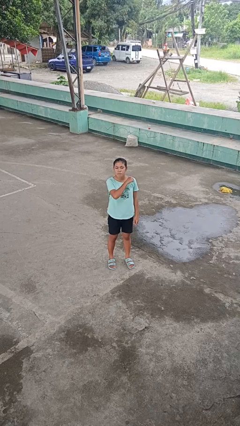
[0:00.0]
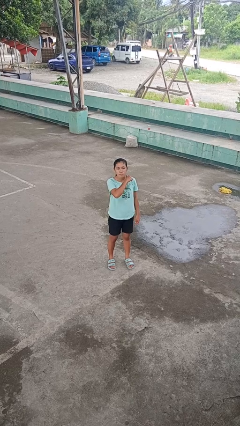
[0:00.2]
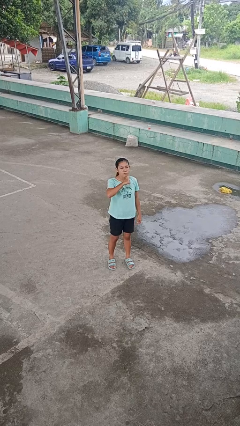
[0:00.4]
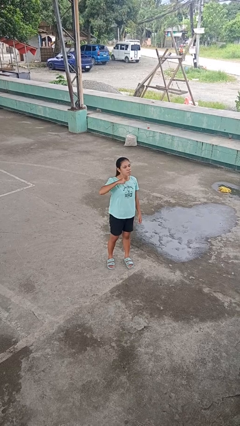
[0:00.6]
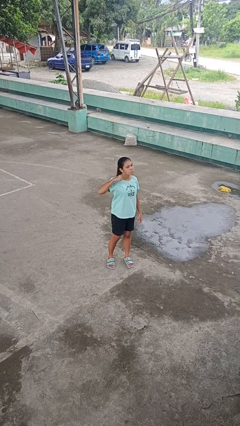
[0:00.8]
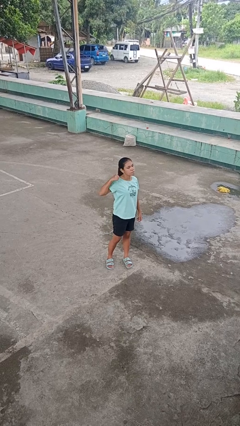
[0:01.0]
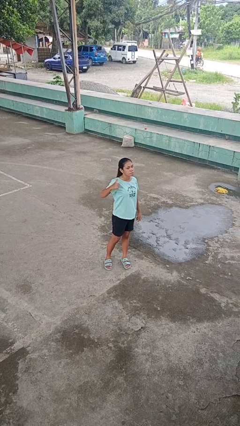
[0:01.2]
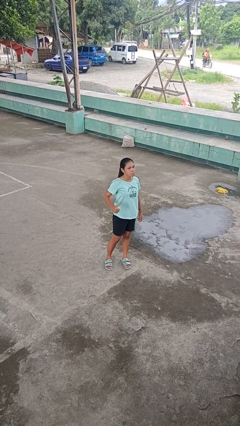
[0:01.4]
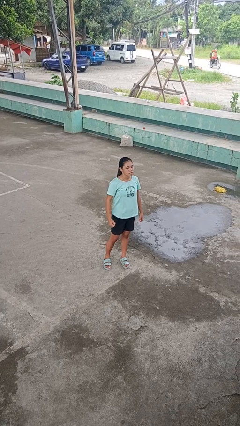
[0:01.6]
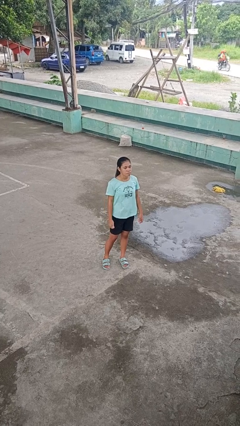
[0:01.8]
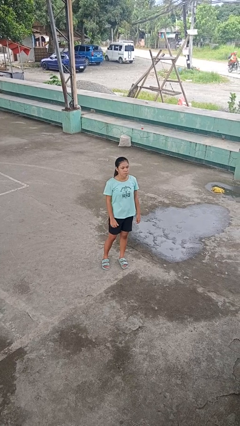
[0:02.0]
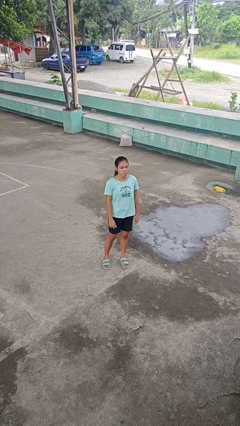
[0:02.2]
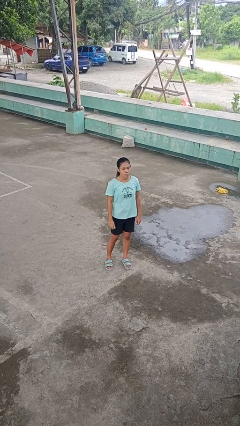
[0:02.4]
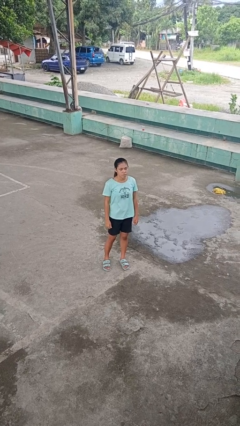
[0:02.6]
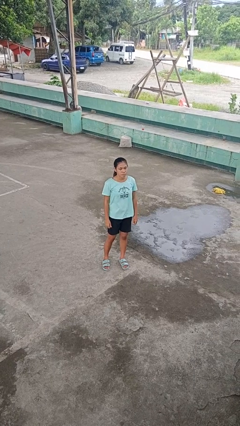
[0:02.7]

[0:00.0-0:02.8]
person gestures cut

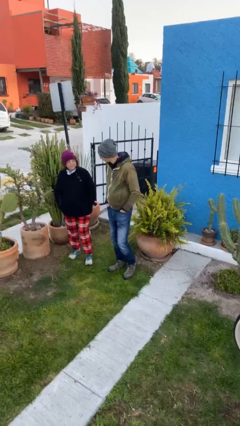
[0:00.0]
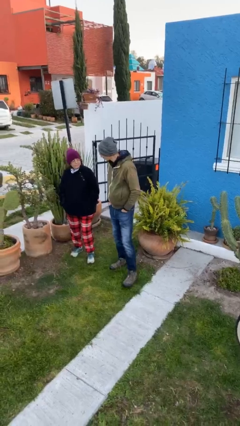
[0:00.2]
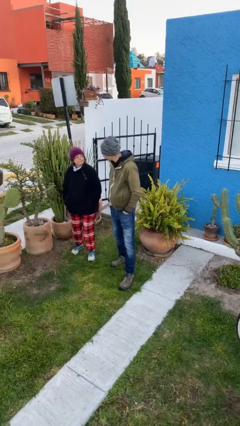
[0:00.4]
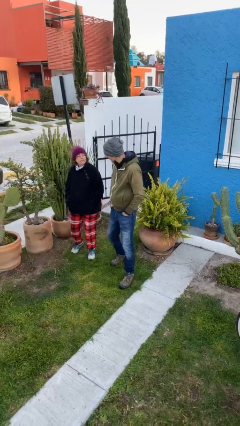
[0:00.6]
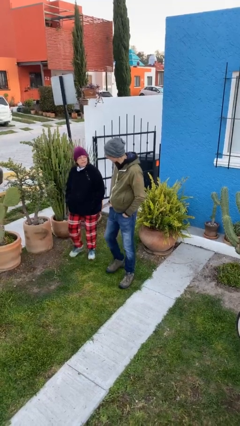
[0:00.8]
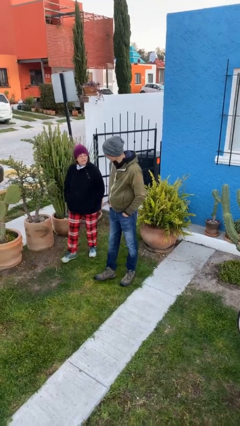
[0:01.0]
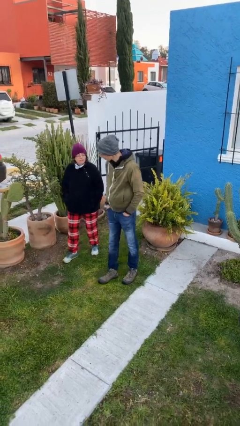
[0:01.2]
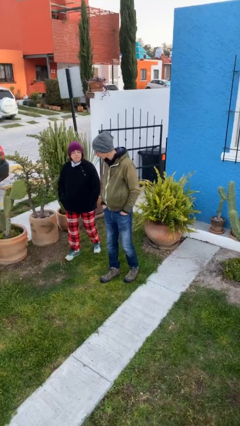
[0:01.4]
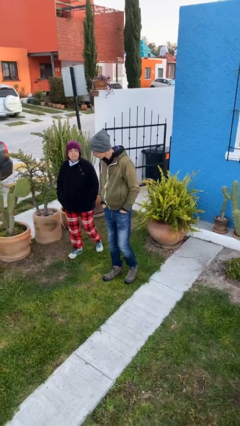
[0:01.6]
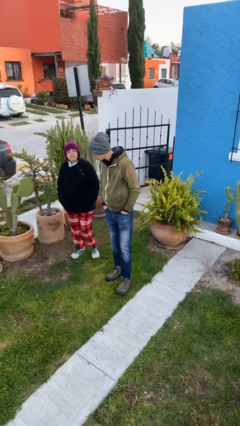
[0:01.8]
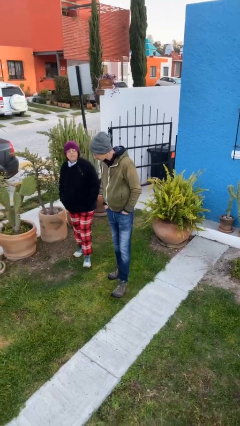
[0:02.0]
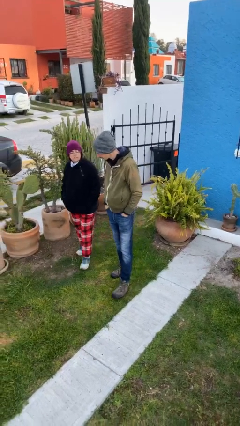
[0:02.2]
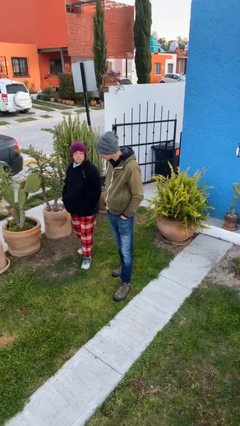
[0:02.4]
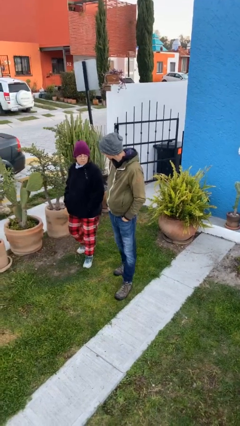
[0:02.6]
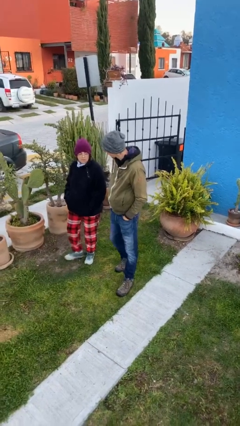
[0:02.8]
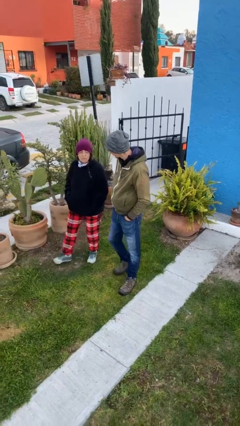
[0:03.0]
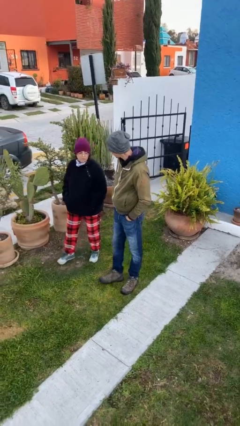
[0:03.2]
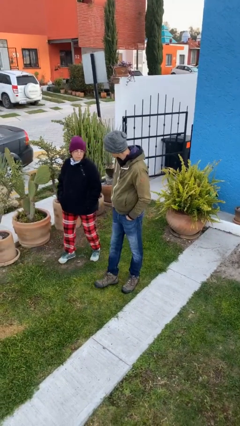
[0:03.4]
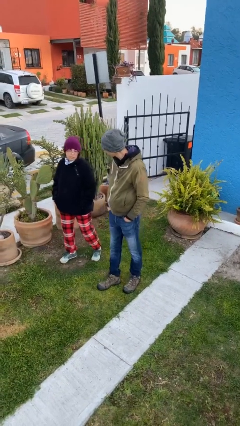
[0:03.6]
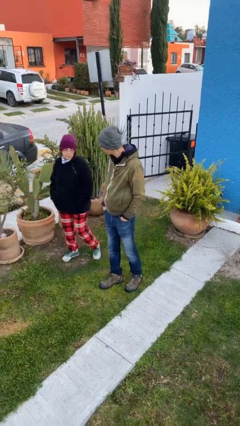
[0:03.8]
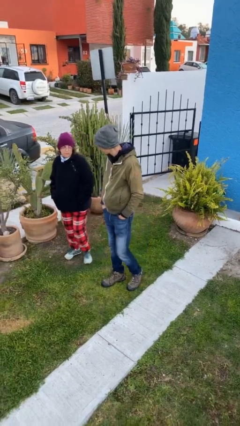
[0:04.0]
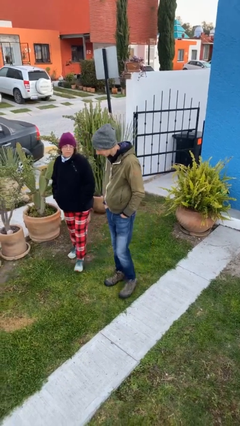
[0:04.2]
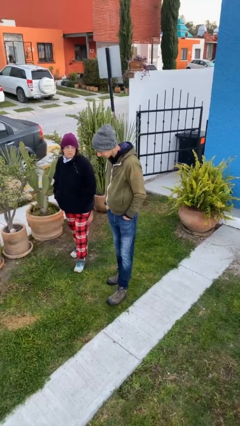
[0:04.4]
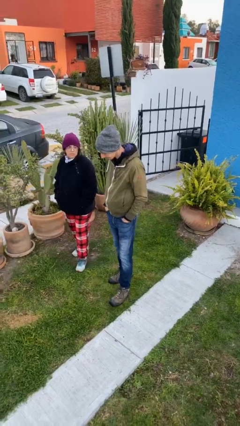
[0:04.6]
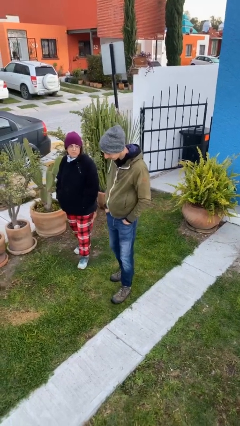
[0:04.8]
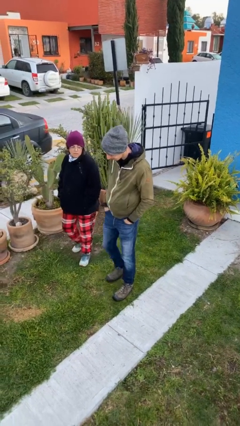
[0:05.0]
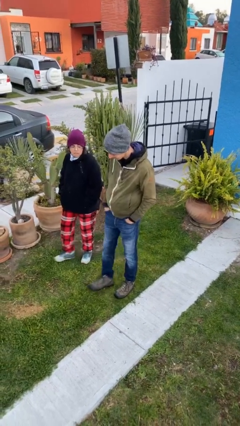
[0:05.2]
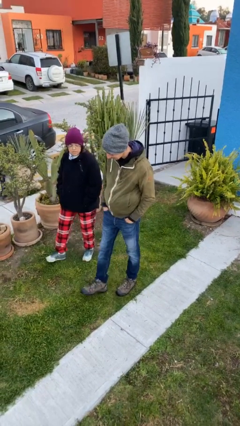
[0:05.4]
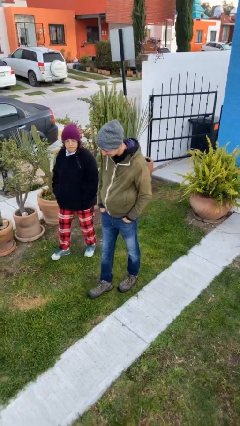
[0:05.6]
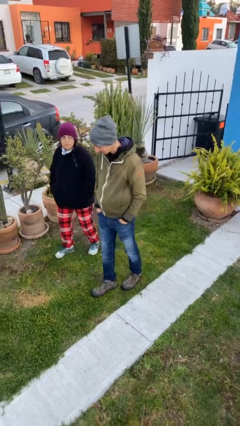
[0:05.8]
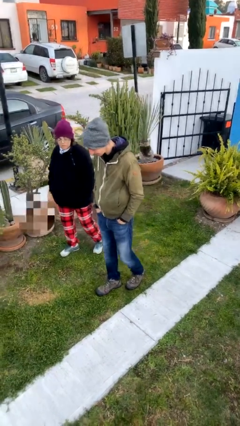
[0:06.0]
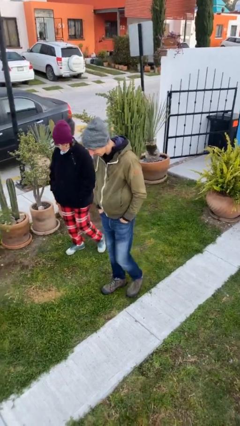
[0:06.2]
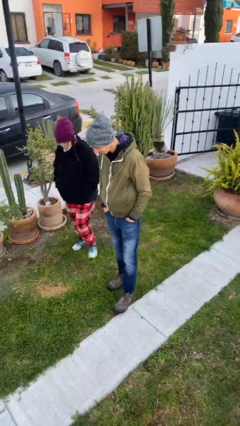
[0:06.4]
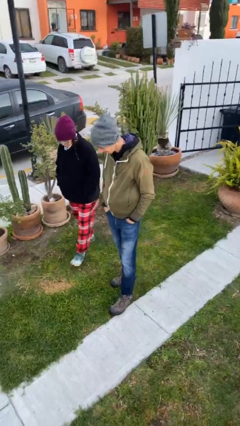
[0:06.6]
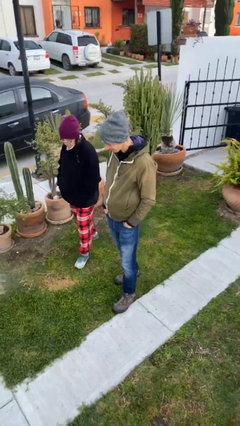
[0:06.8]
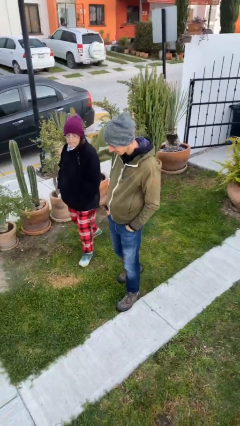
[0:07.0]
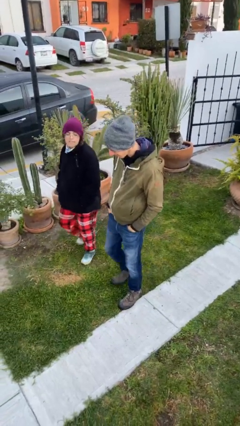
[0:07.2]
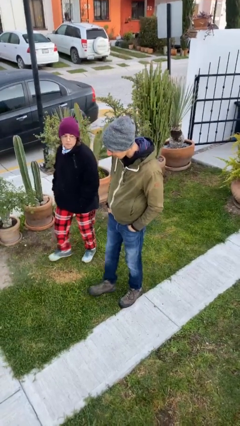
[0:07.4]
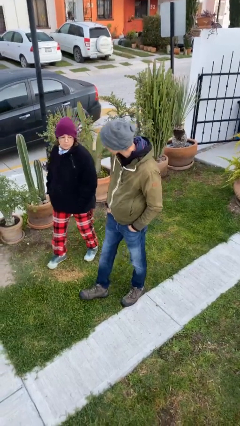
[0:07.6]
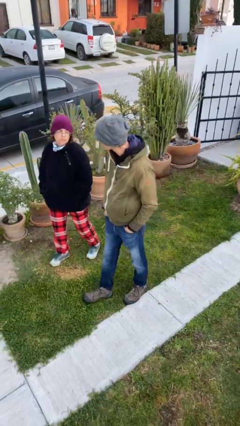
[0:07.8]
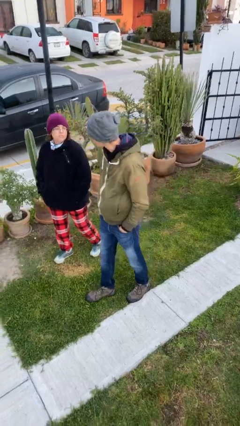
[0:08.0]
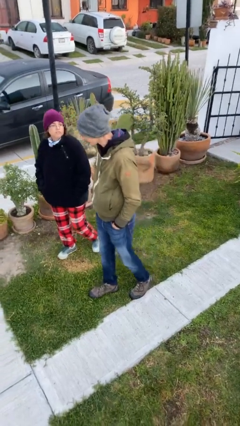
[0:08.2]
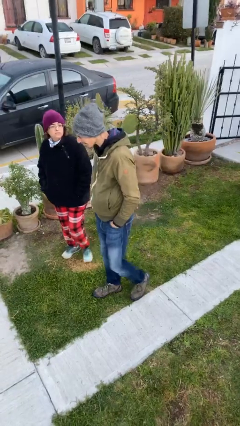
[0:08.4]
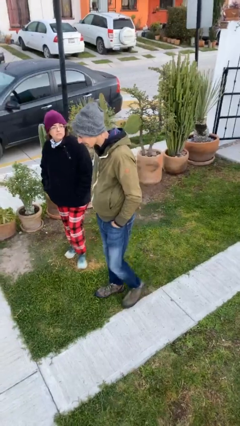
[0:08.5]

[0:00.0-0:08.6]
person talks to person

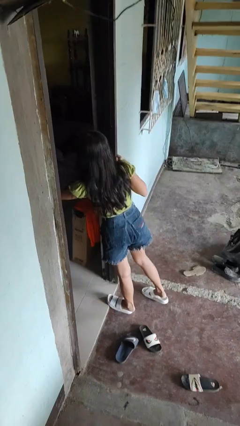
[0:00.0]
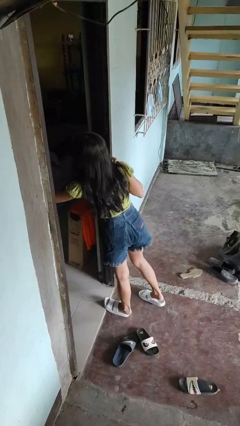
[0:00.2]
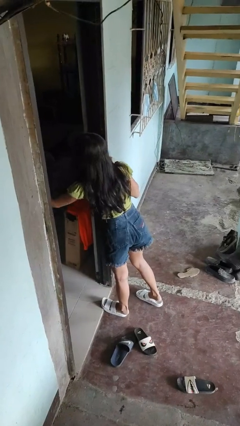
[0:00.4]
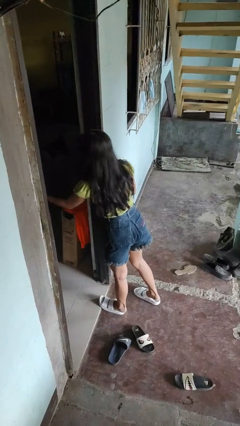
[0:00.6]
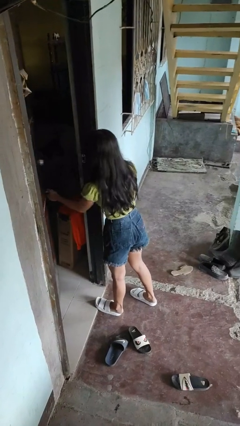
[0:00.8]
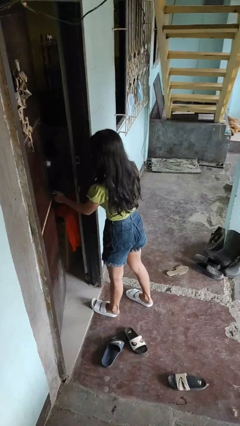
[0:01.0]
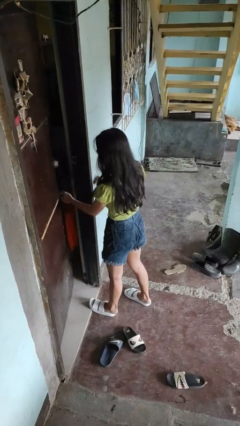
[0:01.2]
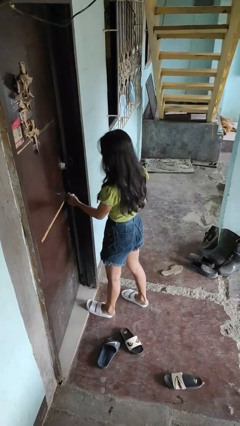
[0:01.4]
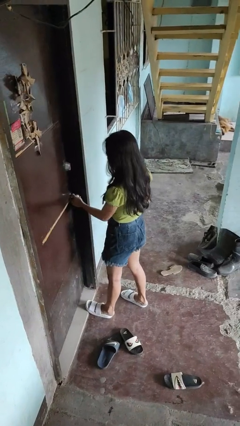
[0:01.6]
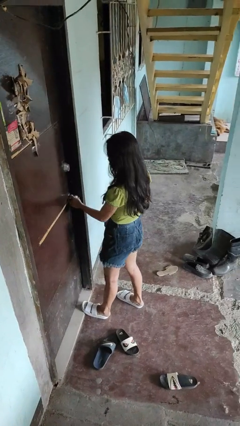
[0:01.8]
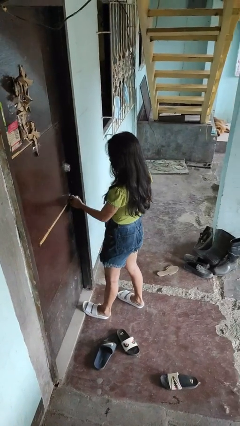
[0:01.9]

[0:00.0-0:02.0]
person closes facility door

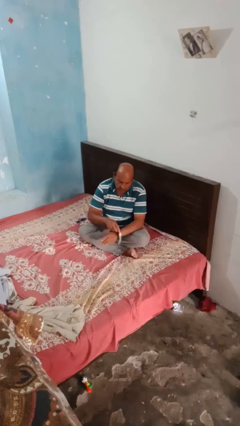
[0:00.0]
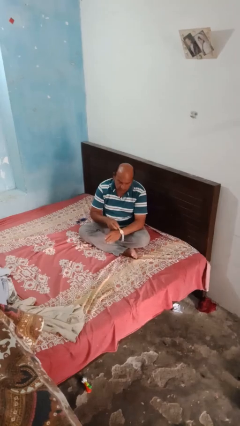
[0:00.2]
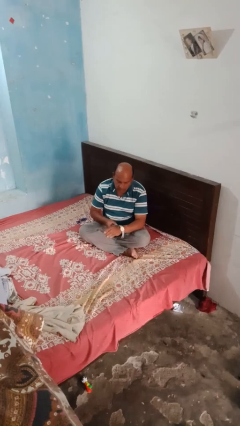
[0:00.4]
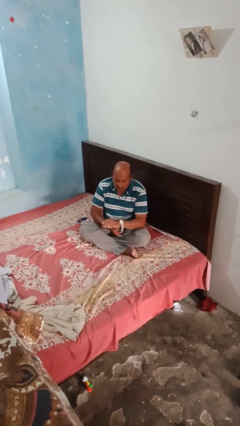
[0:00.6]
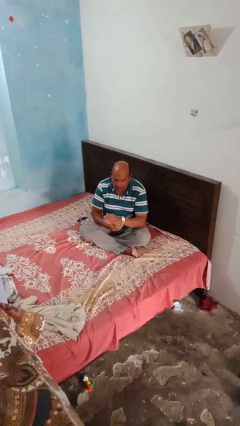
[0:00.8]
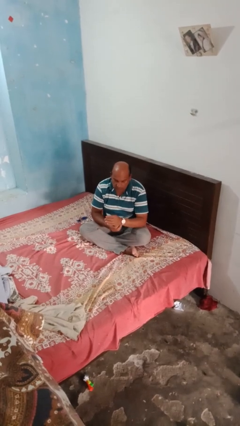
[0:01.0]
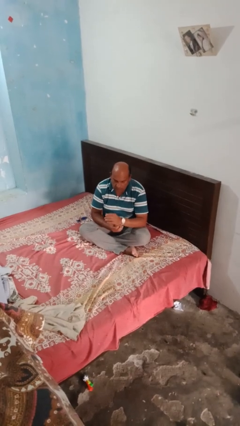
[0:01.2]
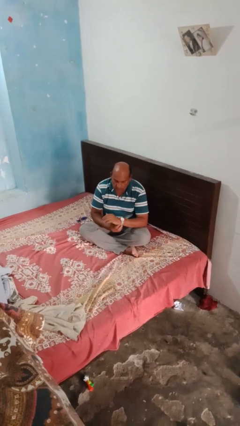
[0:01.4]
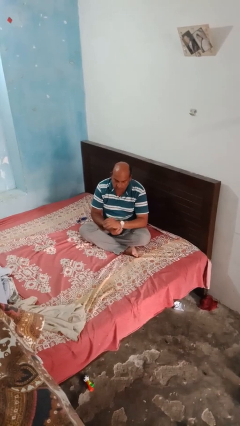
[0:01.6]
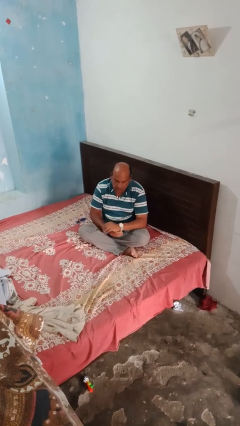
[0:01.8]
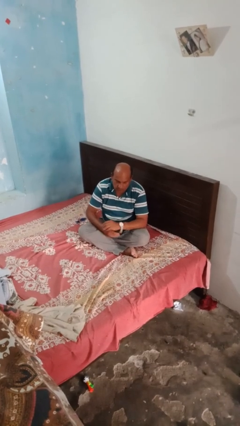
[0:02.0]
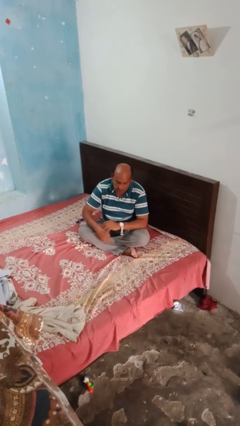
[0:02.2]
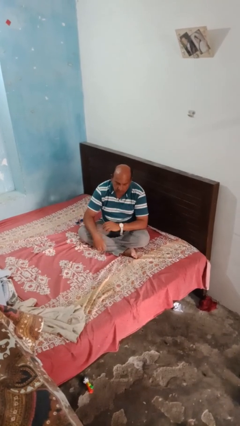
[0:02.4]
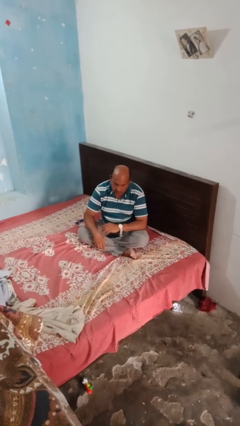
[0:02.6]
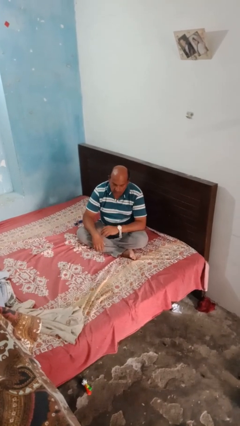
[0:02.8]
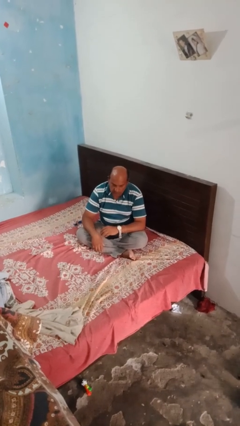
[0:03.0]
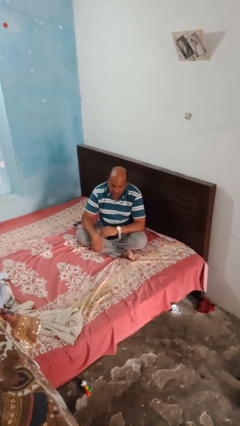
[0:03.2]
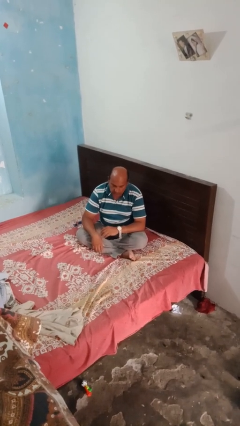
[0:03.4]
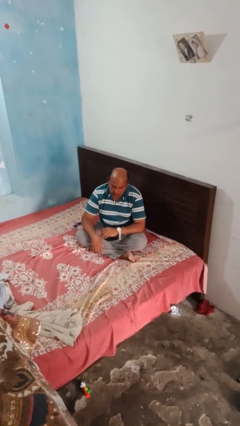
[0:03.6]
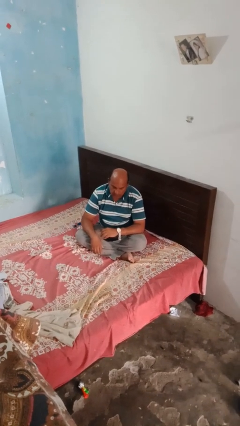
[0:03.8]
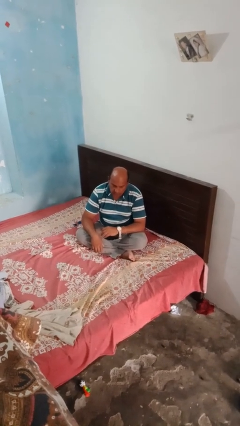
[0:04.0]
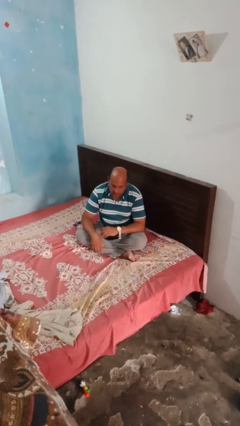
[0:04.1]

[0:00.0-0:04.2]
person puts on wristwatch

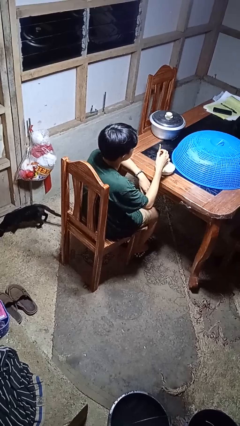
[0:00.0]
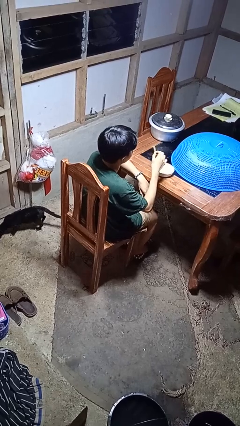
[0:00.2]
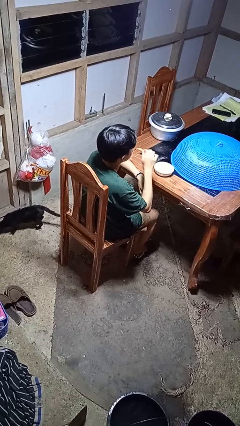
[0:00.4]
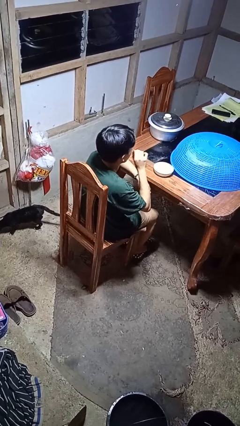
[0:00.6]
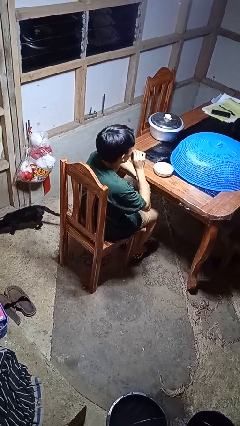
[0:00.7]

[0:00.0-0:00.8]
person eats with hands
